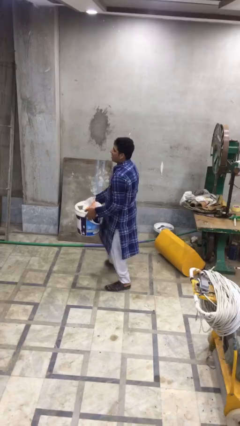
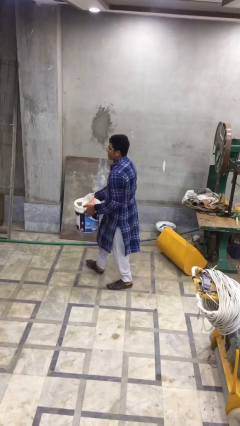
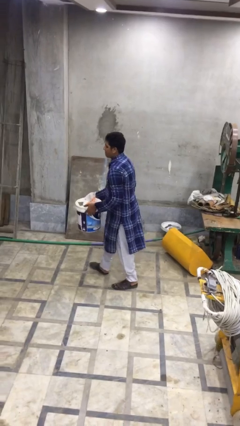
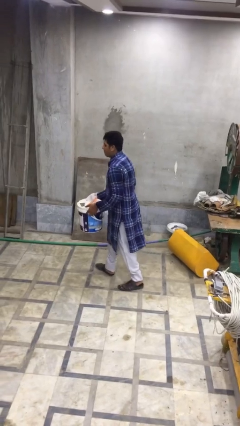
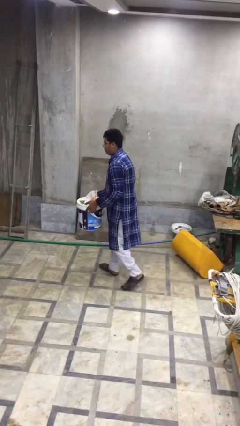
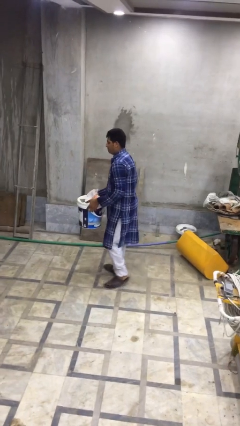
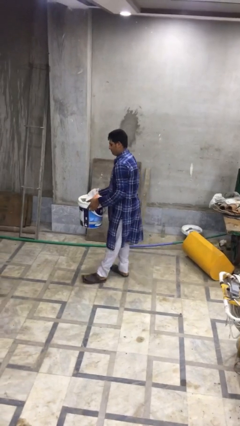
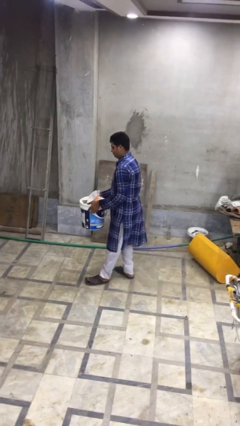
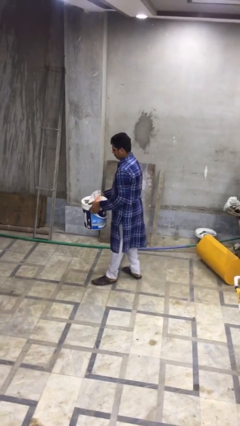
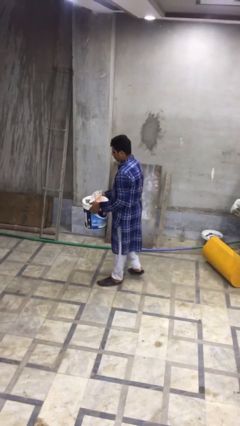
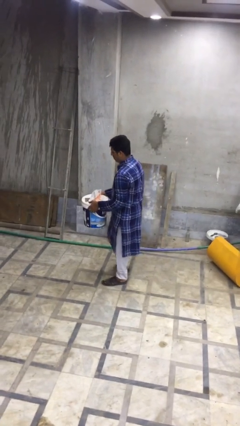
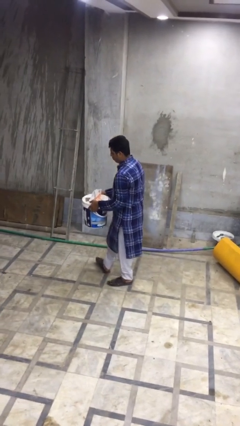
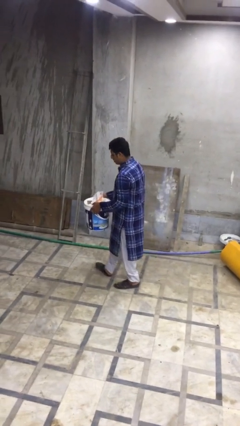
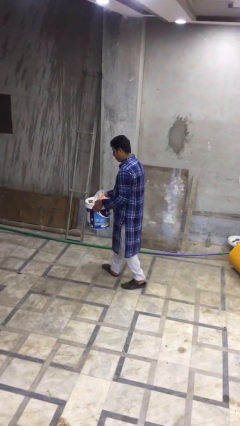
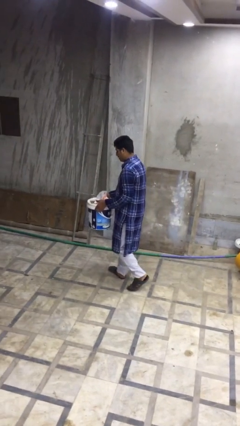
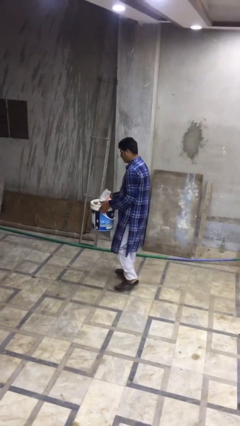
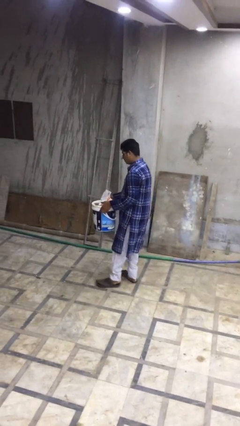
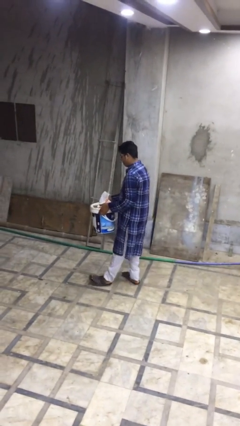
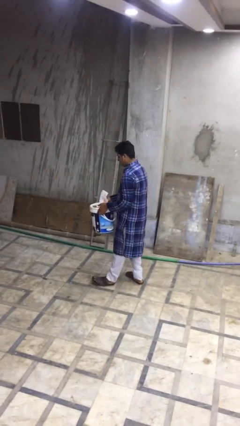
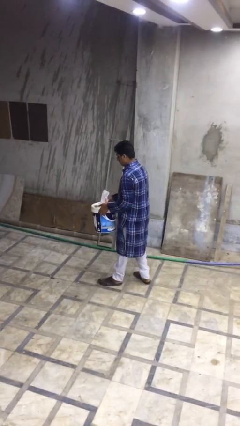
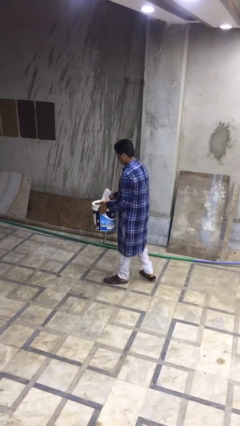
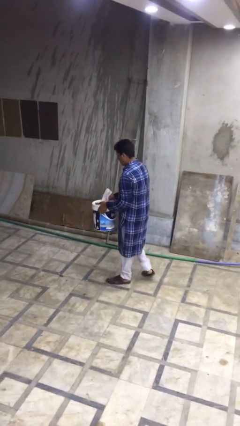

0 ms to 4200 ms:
person carries heavy object

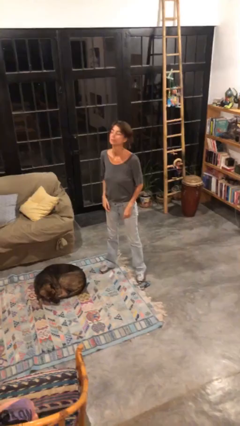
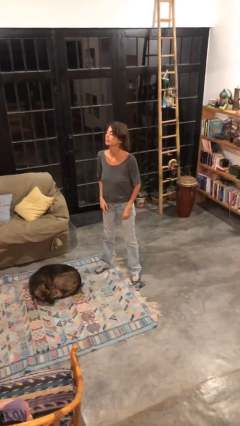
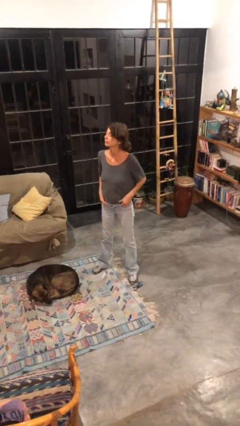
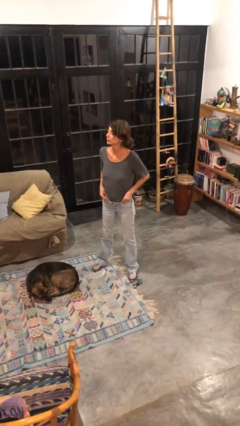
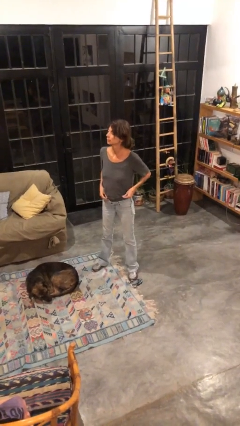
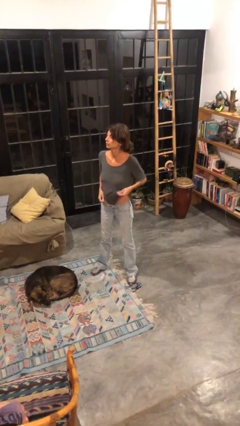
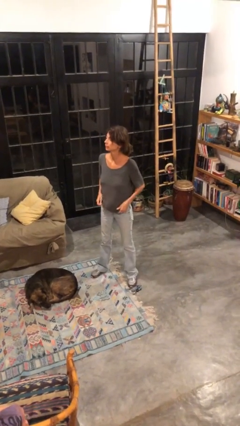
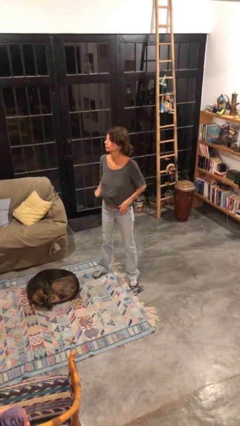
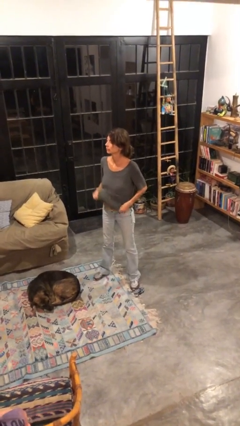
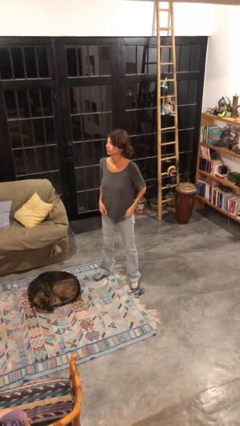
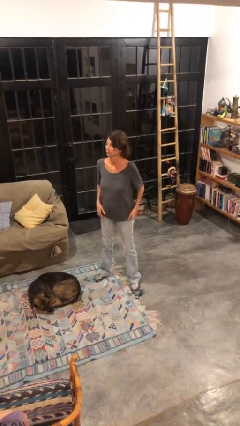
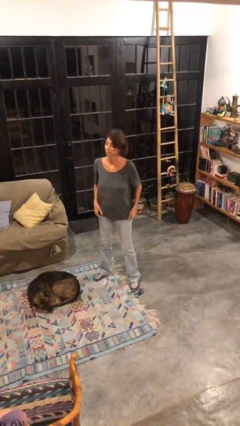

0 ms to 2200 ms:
person untucks shirt

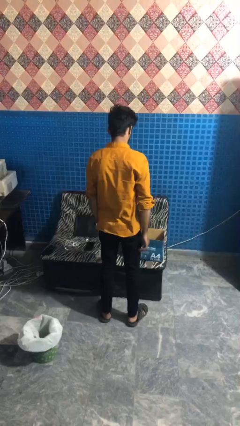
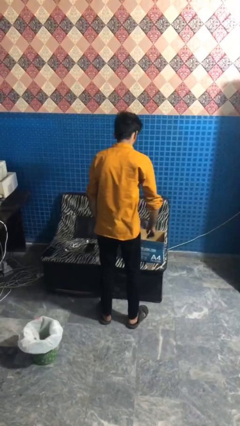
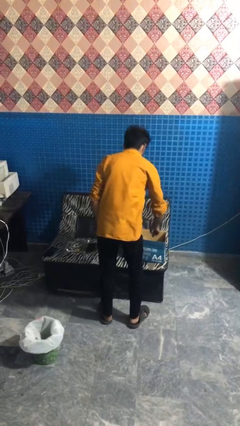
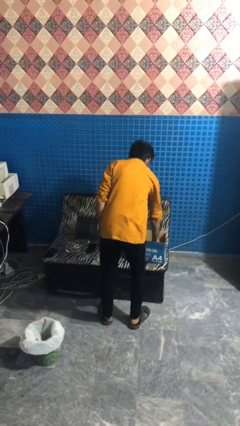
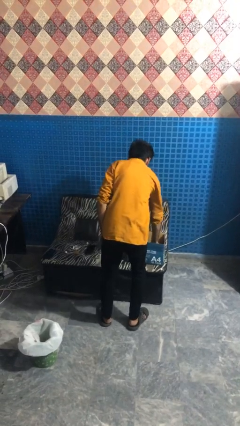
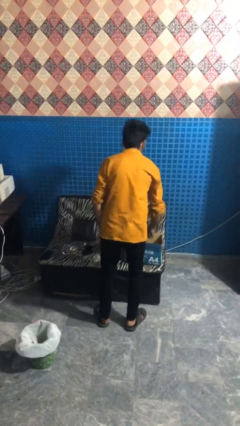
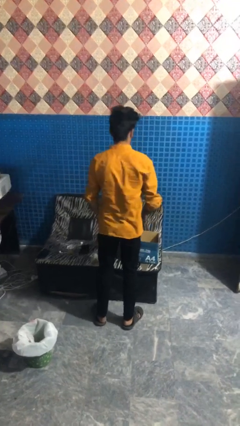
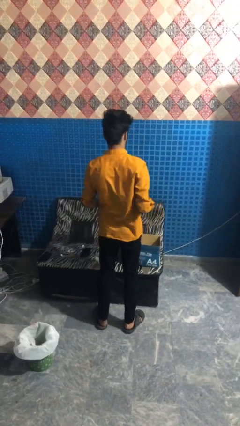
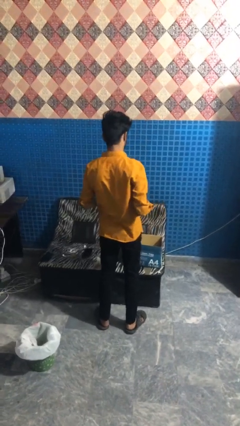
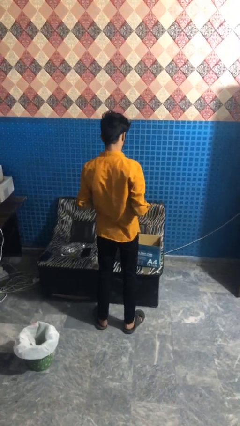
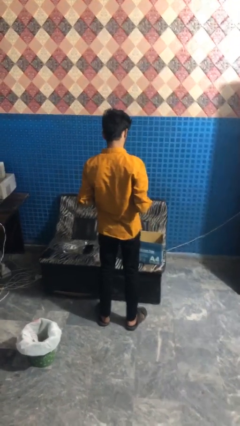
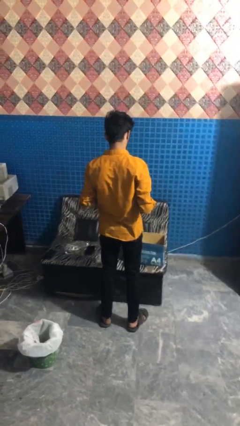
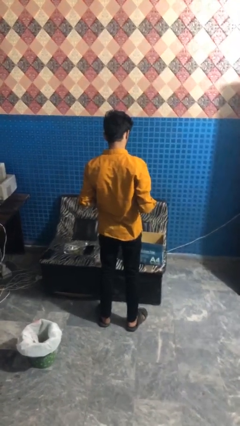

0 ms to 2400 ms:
person takes object from box

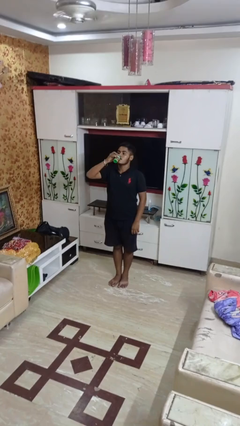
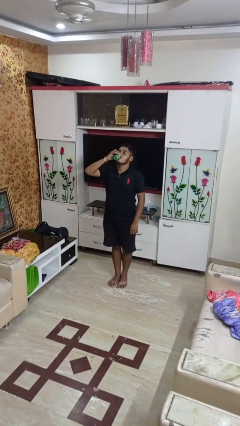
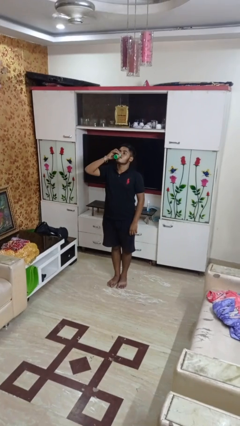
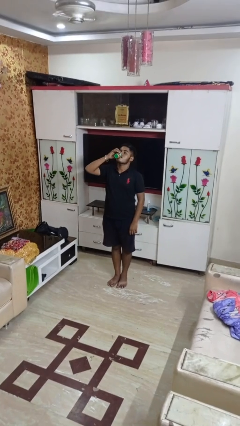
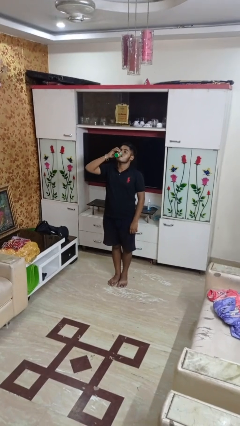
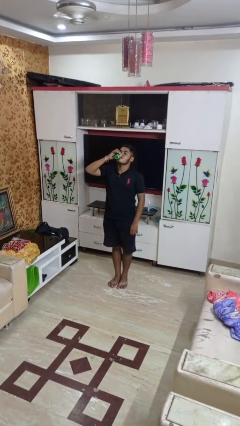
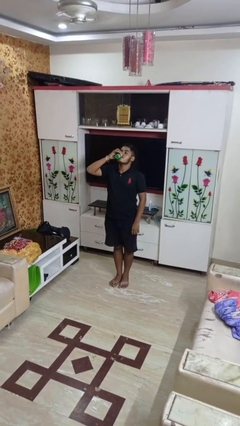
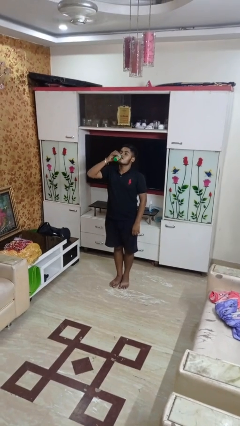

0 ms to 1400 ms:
person drinks from beverage can

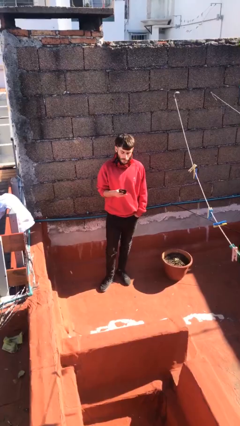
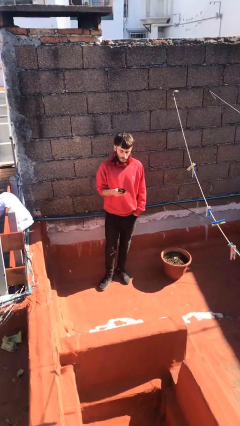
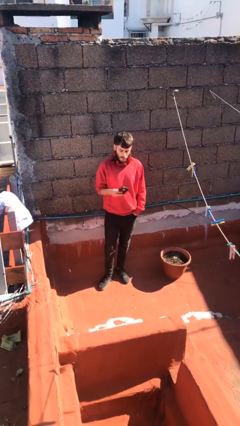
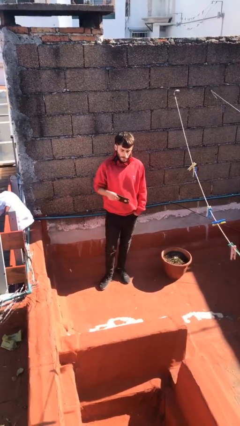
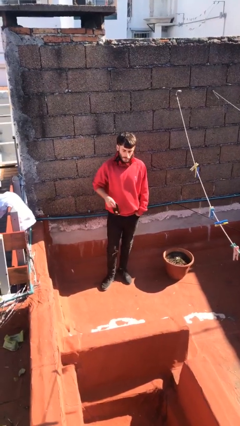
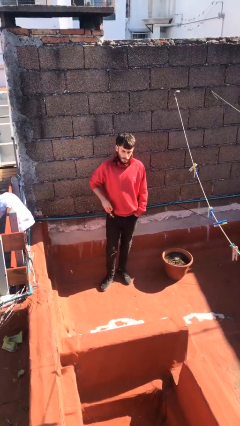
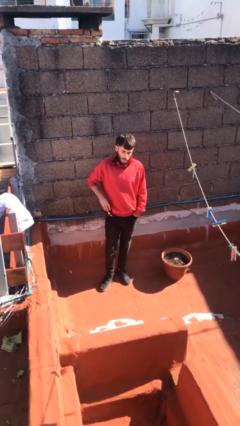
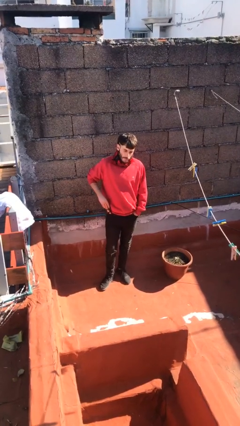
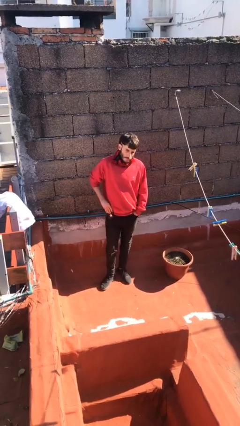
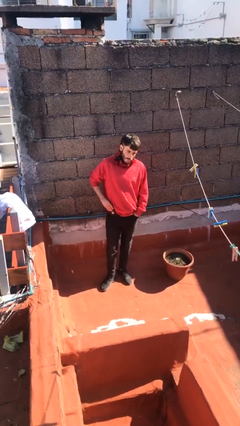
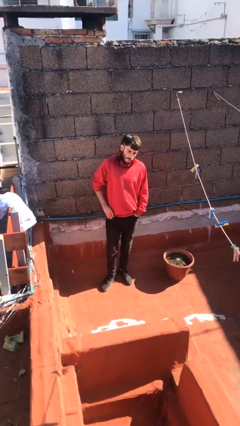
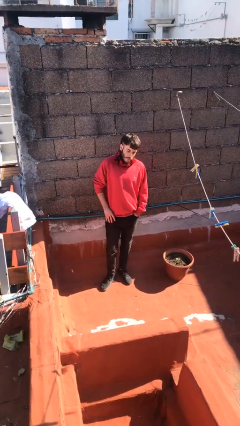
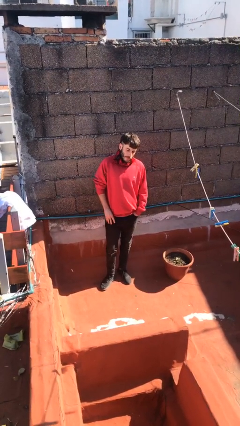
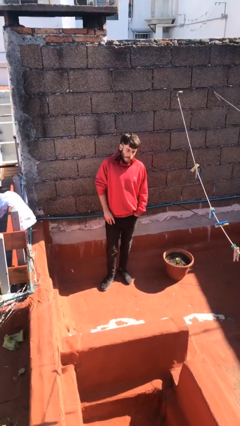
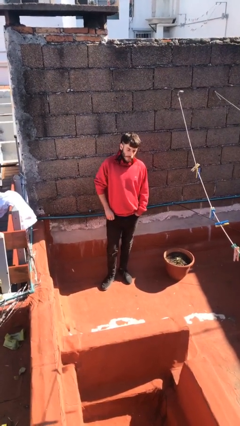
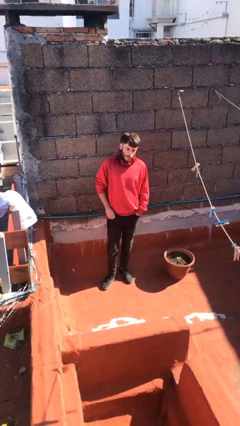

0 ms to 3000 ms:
person puts phone into pocket

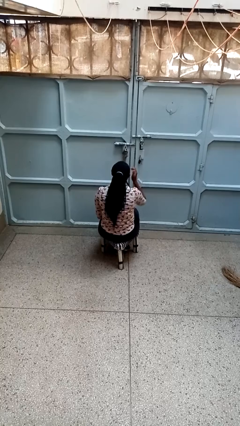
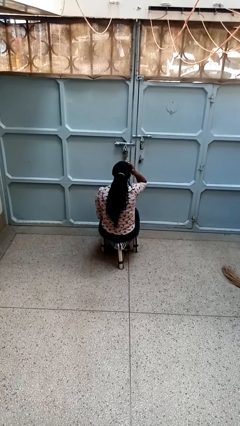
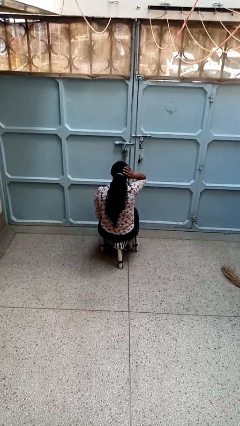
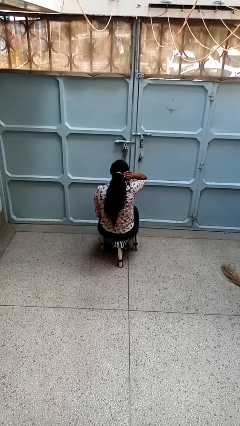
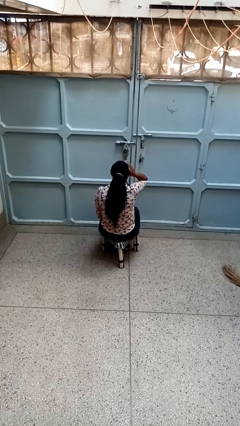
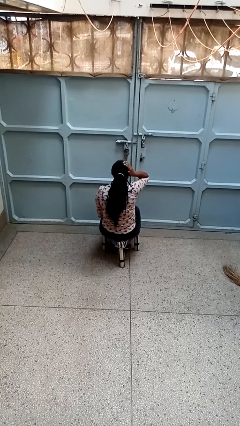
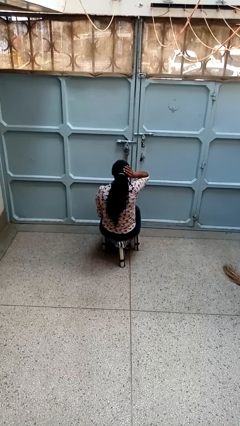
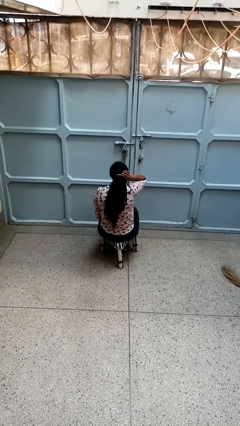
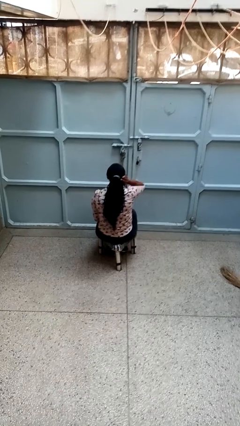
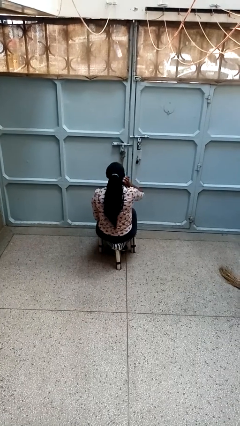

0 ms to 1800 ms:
person strokes hair

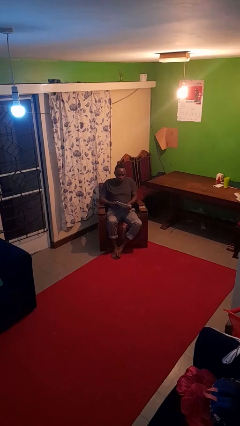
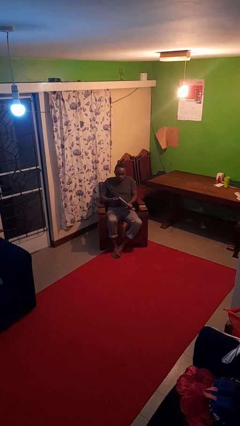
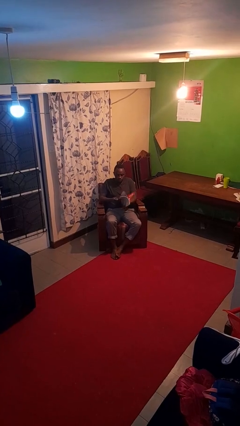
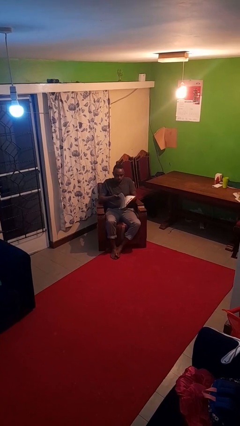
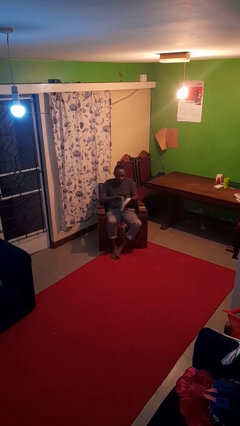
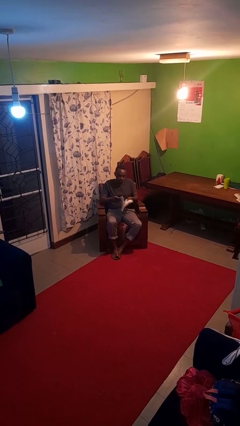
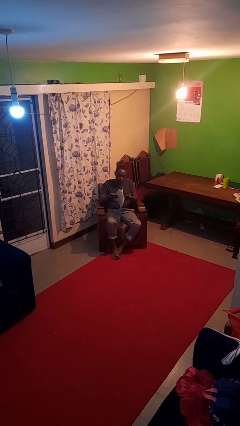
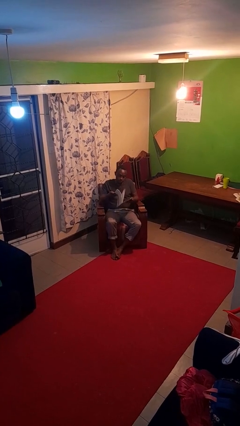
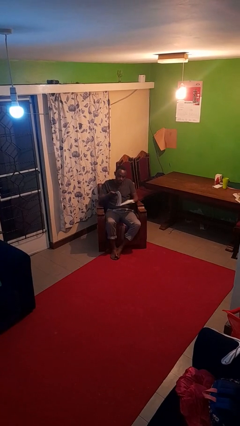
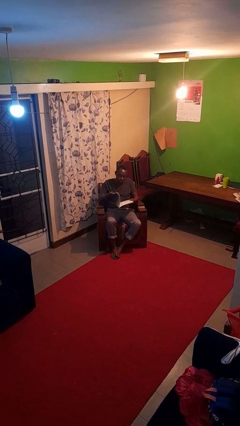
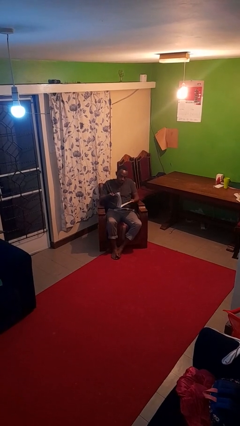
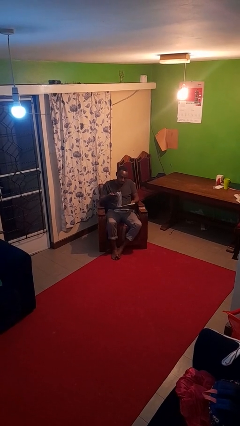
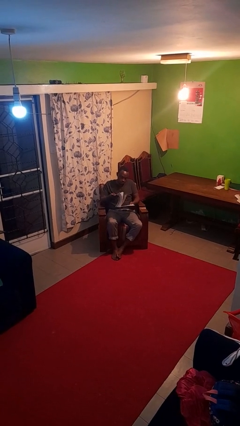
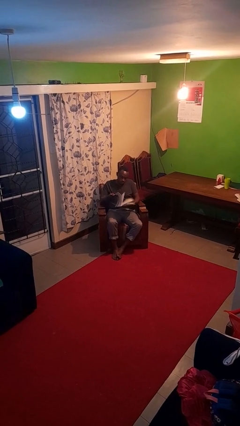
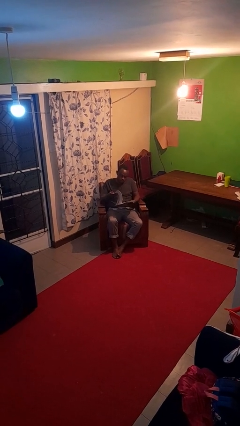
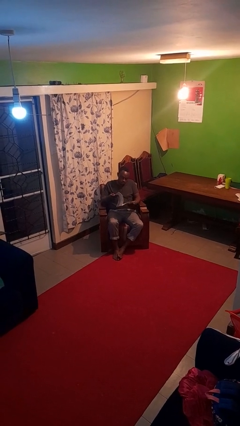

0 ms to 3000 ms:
person reads magazine
